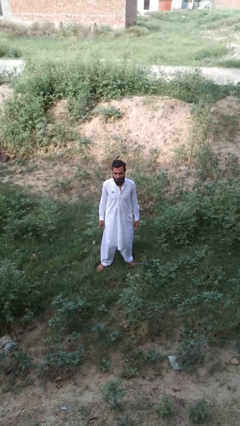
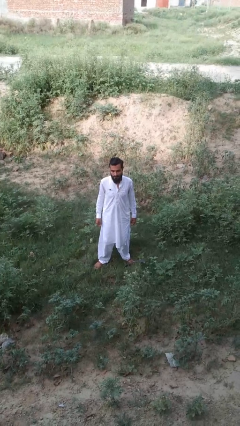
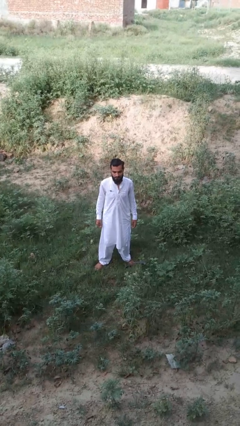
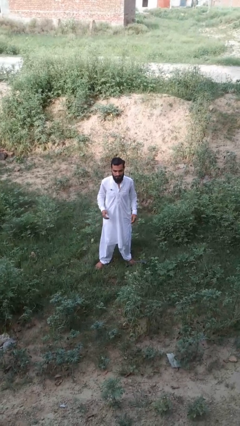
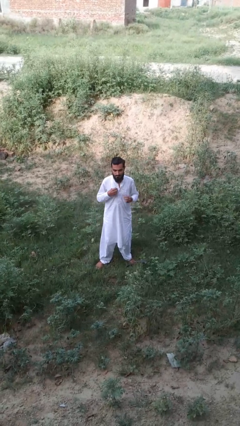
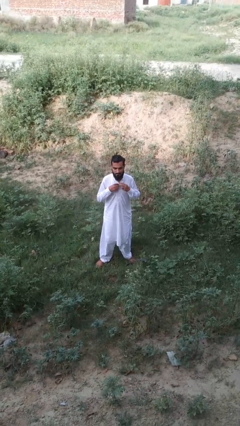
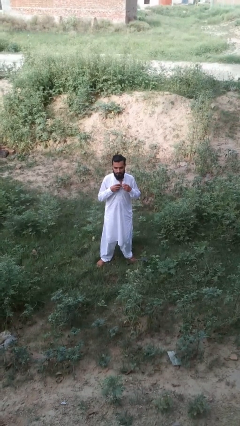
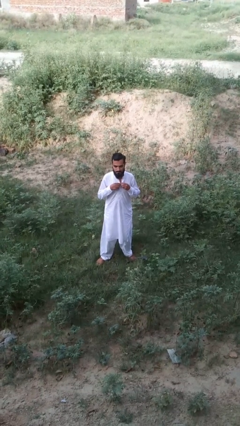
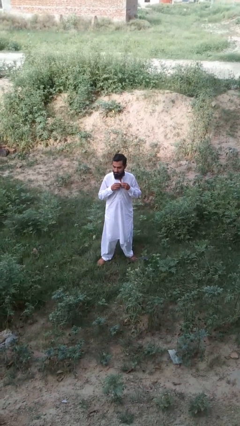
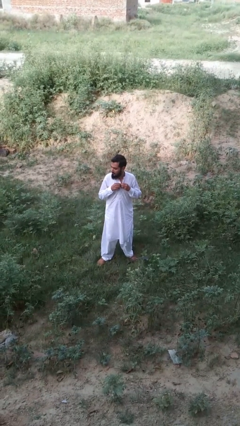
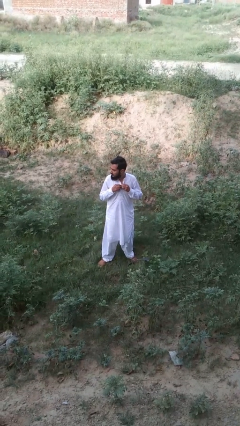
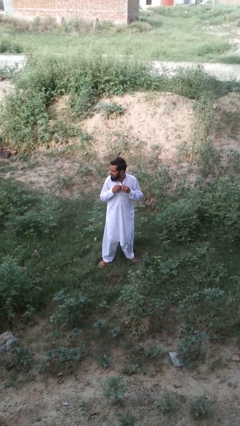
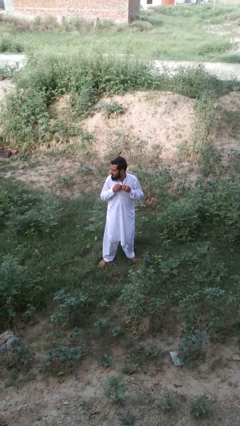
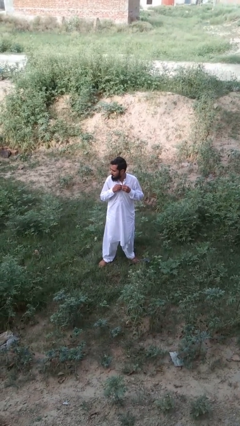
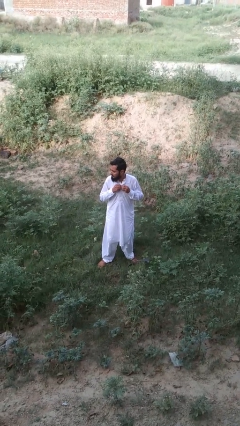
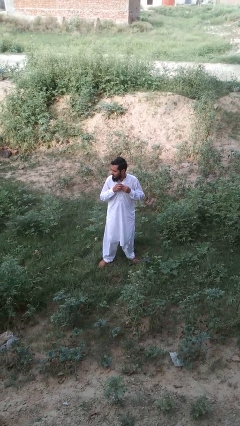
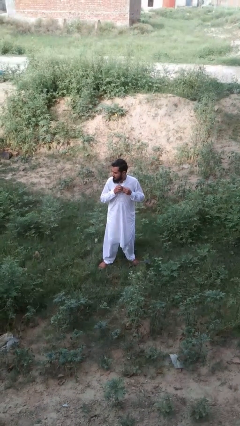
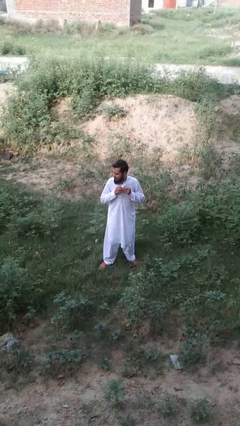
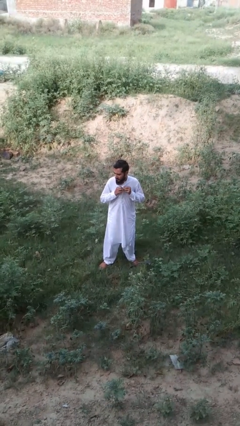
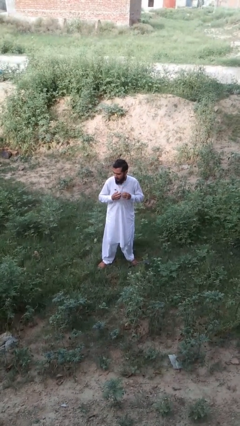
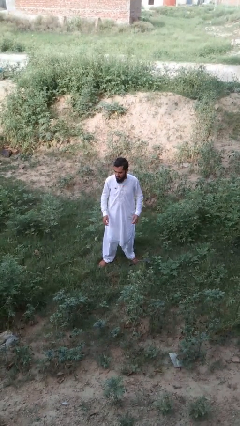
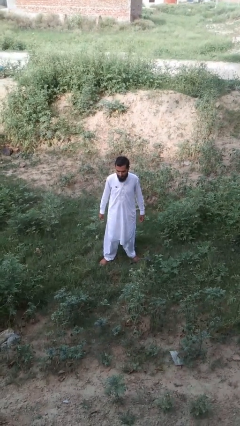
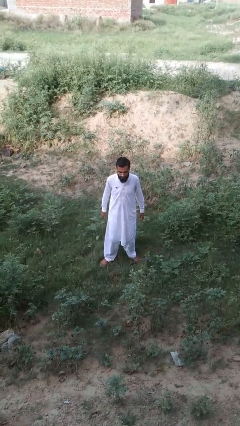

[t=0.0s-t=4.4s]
person buttons shirt

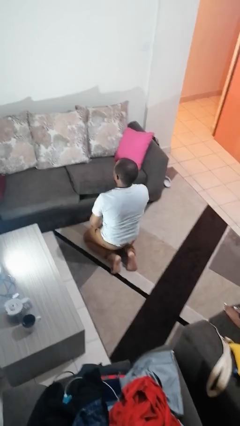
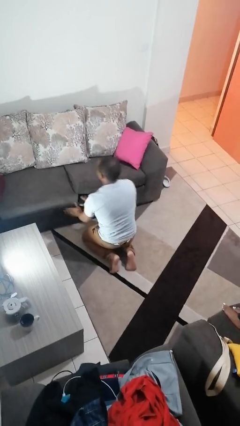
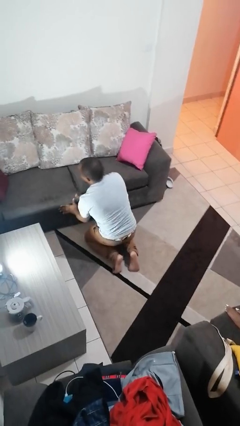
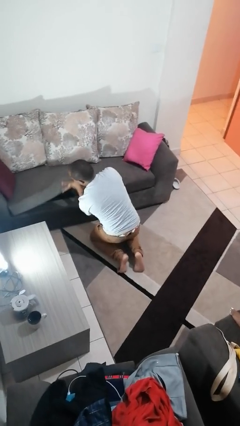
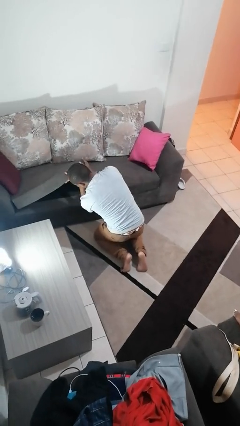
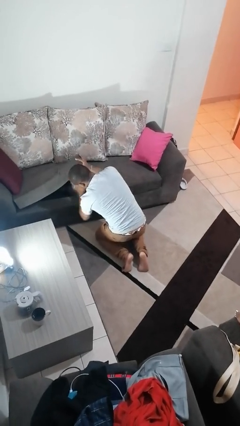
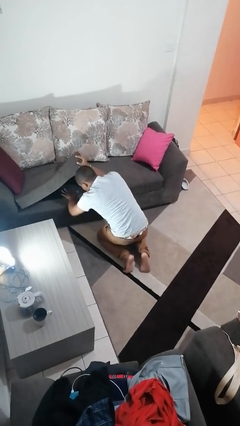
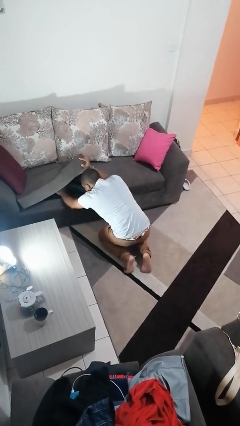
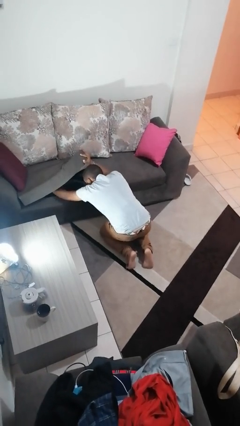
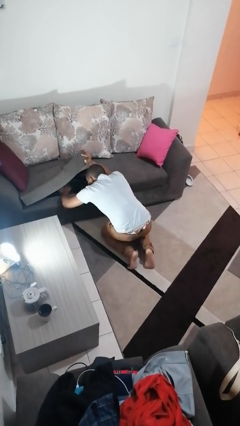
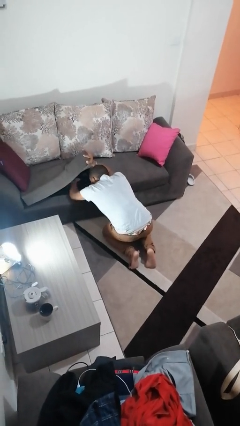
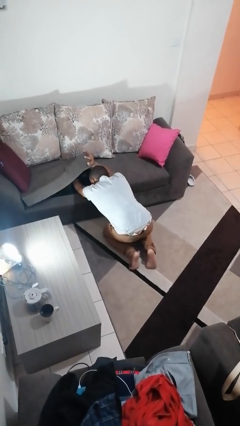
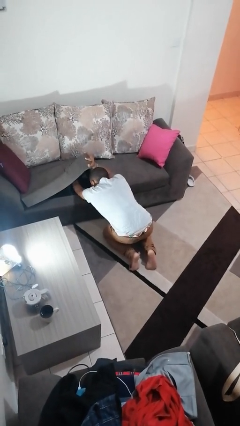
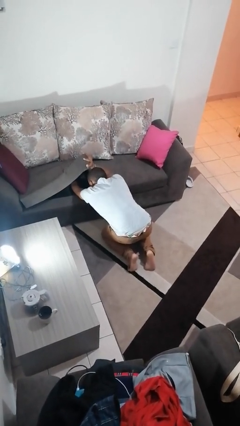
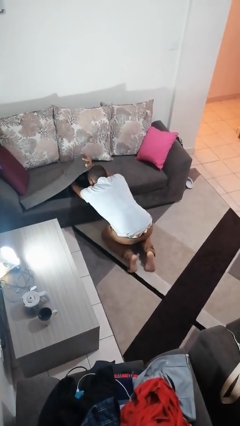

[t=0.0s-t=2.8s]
person searches under couch

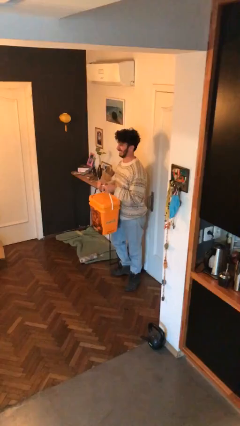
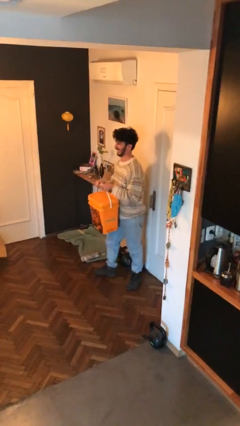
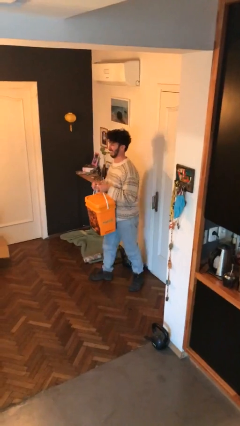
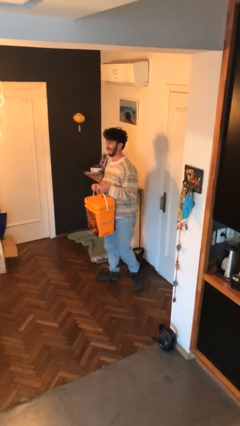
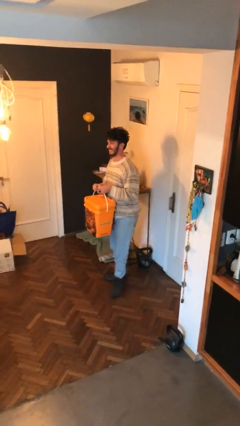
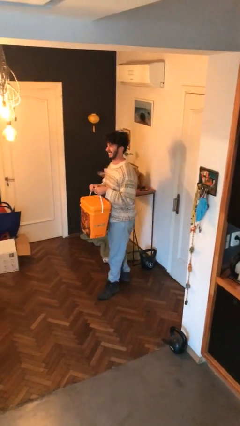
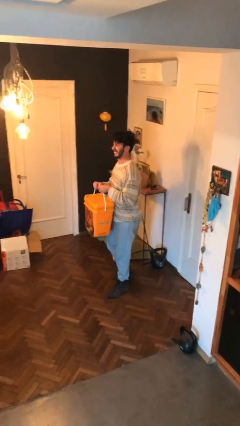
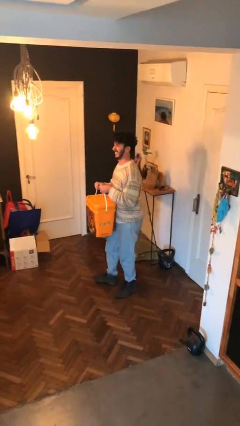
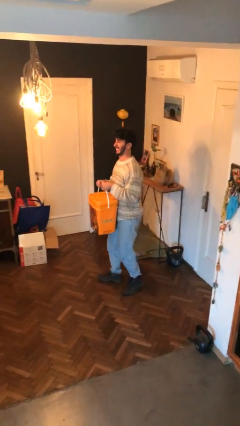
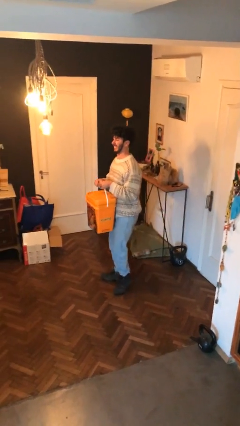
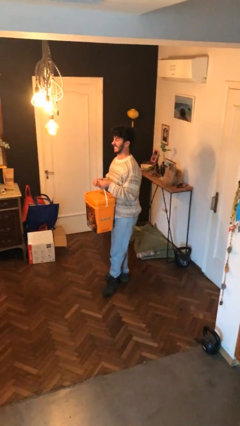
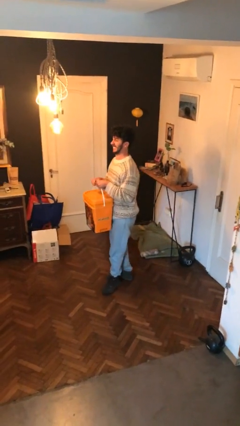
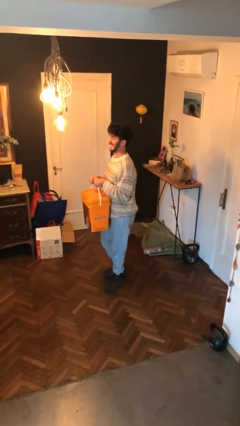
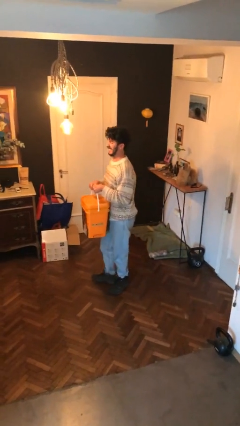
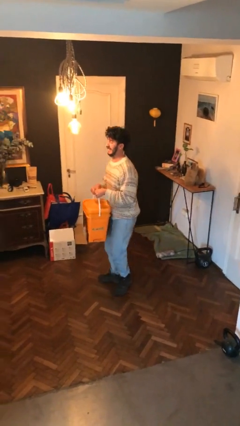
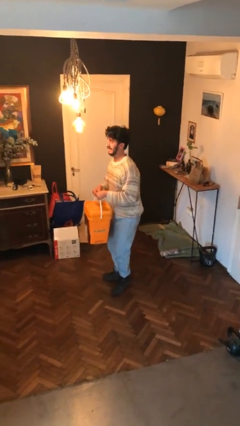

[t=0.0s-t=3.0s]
person carries heavy object

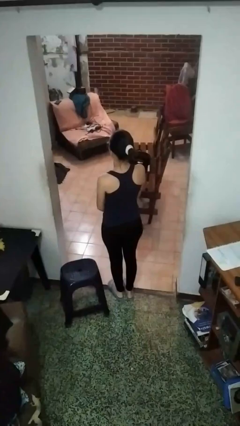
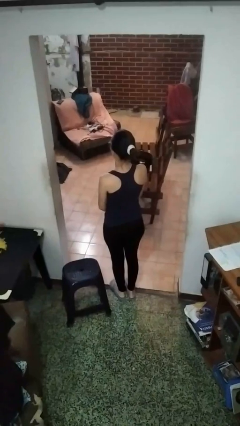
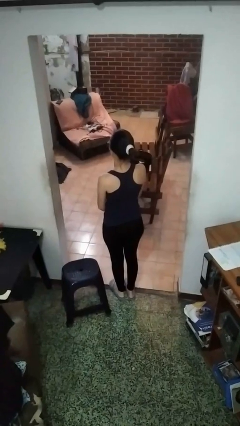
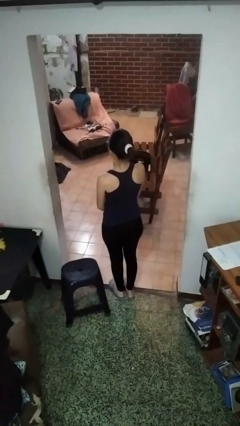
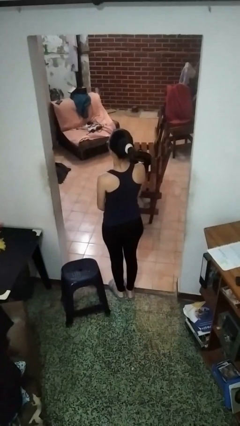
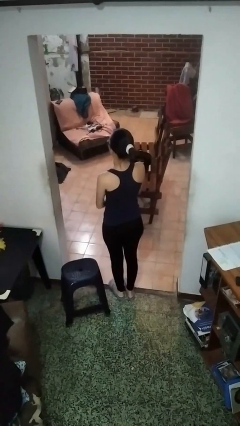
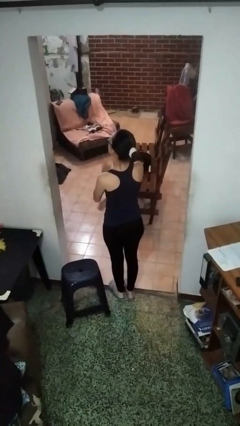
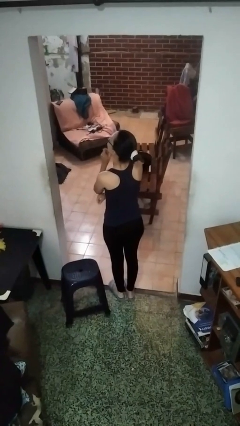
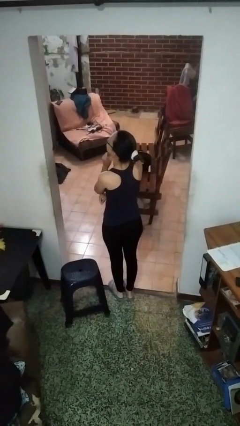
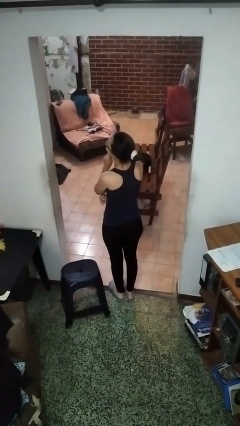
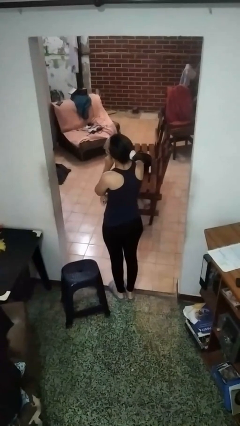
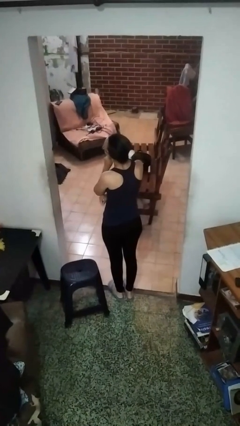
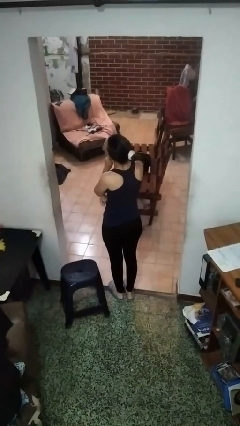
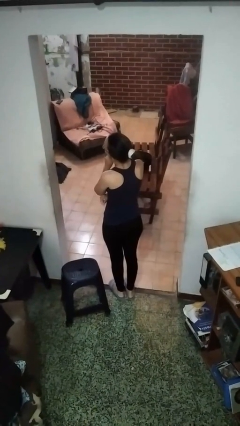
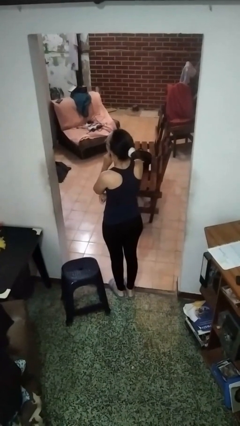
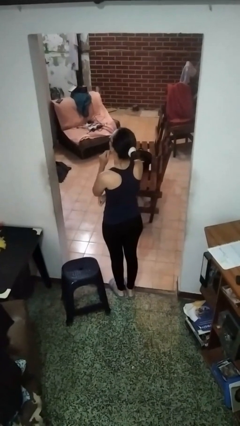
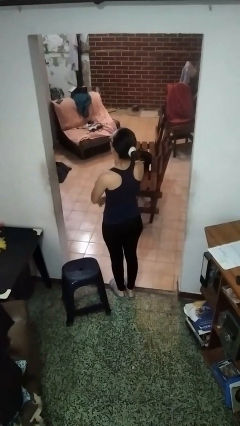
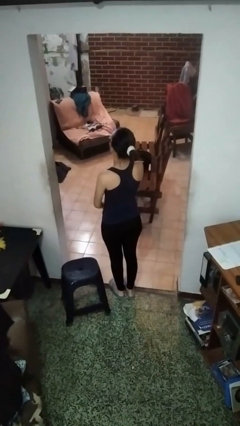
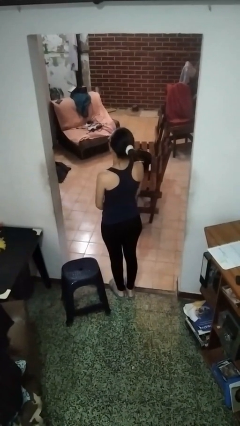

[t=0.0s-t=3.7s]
person strokes chin

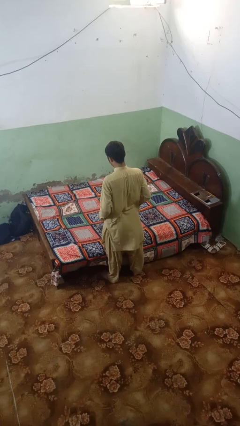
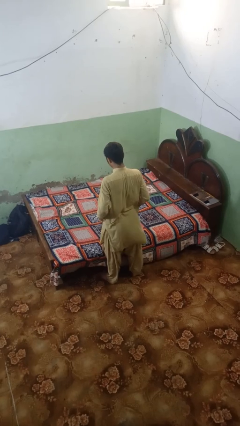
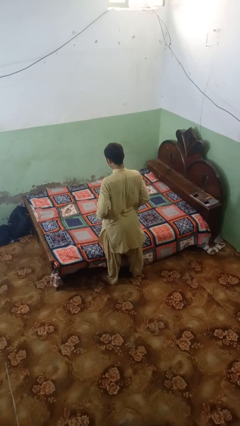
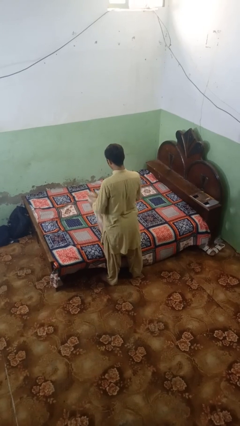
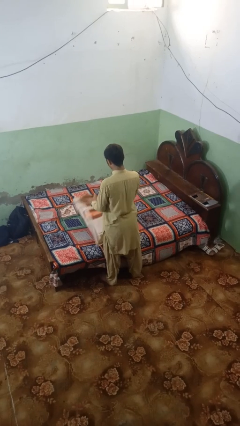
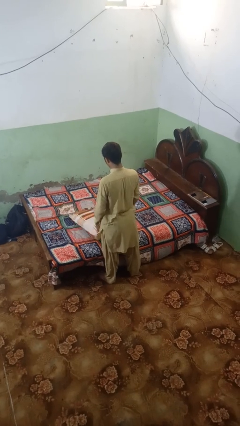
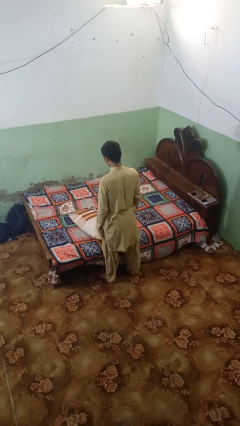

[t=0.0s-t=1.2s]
person throws object on bed

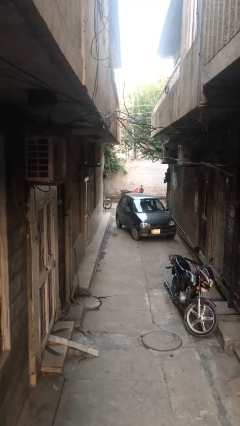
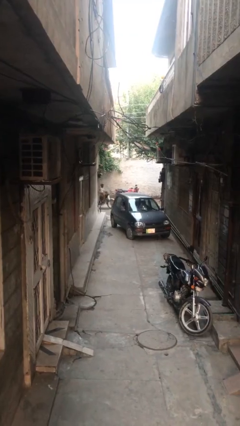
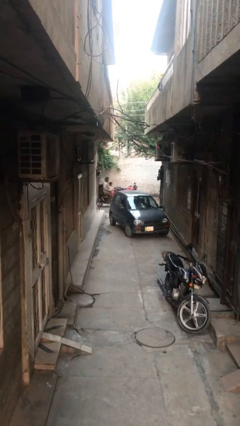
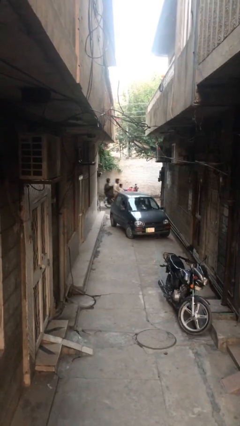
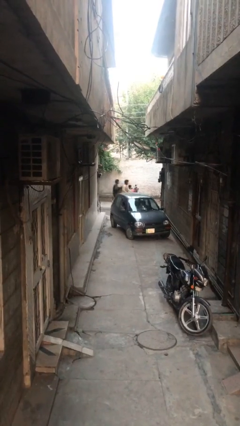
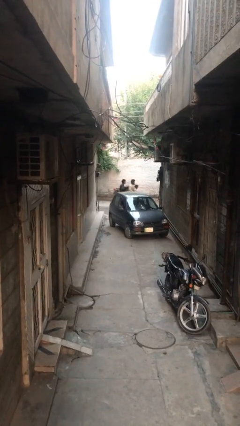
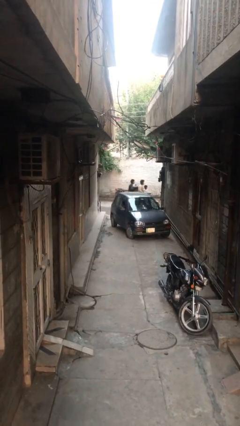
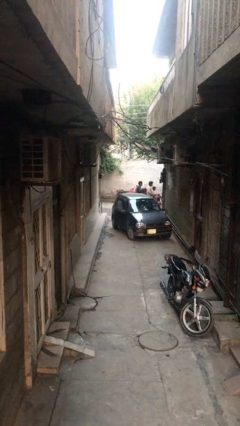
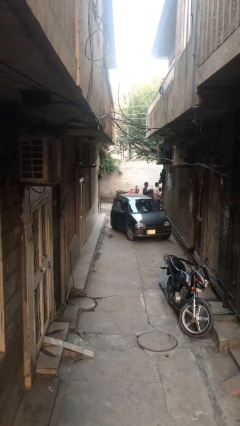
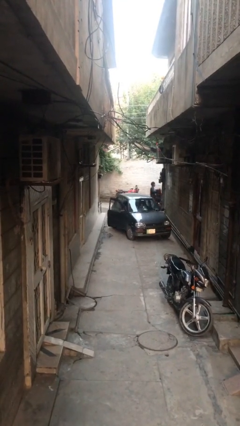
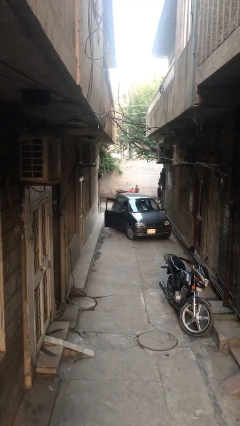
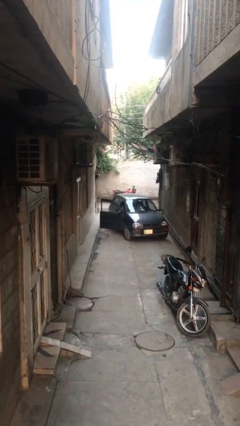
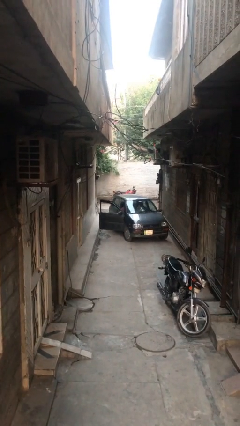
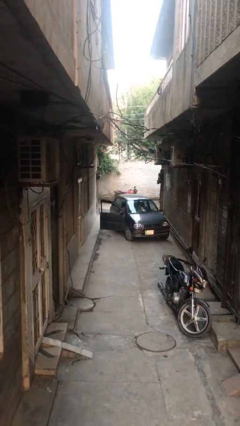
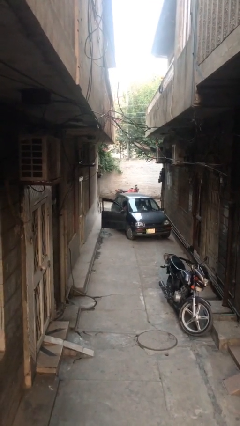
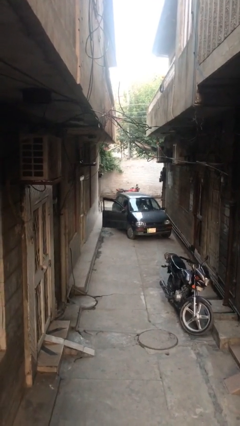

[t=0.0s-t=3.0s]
person opens car door
